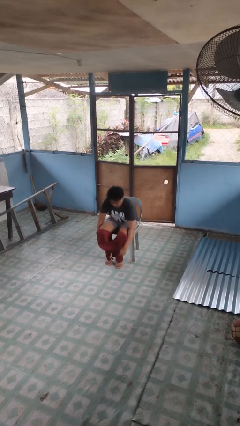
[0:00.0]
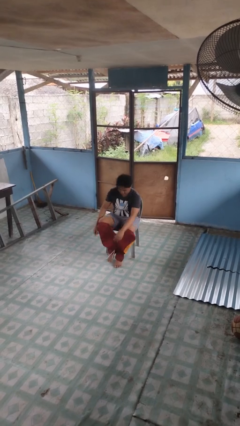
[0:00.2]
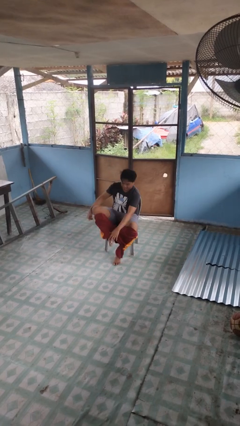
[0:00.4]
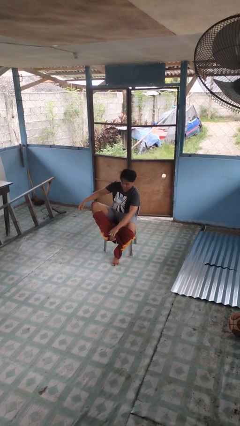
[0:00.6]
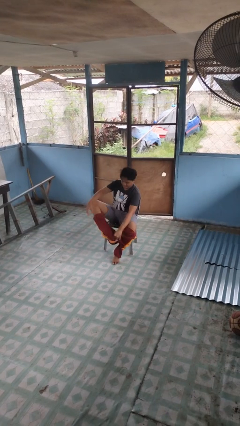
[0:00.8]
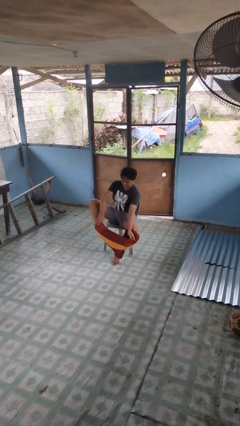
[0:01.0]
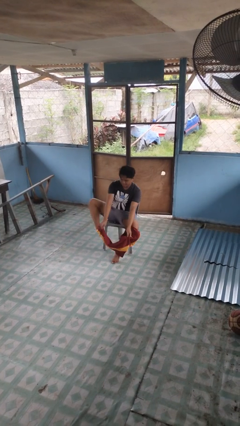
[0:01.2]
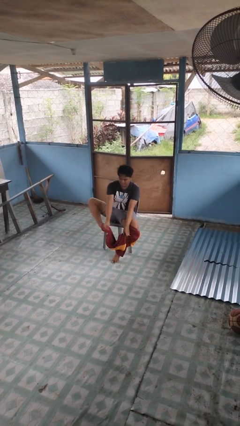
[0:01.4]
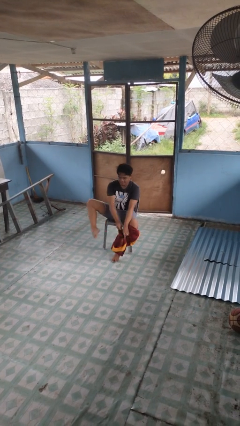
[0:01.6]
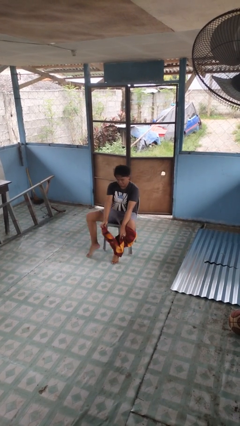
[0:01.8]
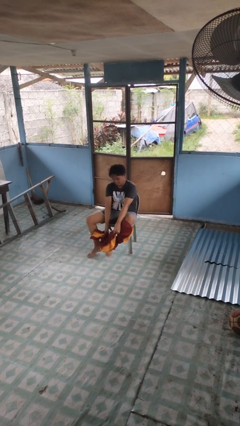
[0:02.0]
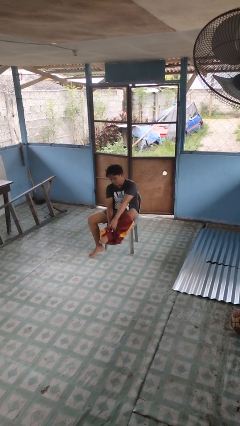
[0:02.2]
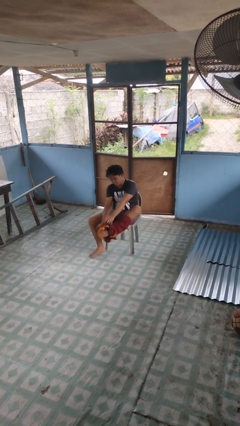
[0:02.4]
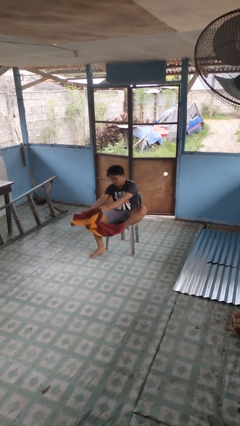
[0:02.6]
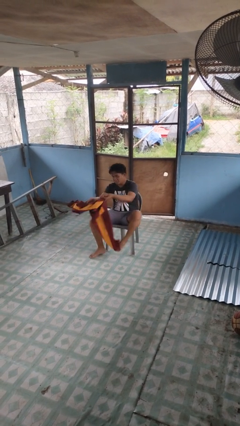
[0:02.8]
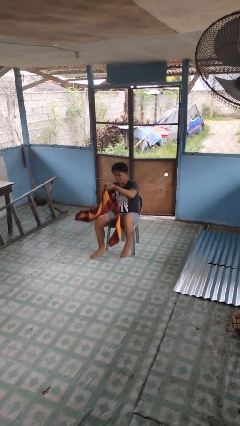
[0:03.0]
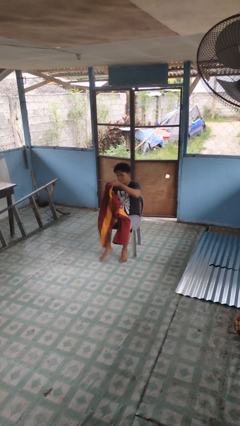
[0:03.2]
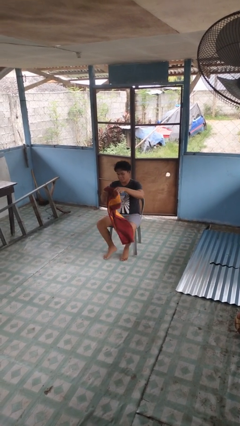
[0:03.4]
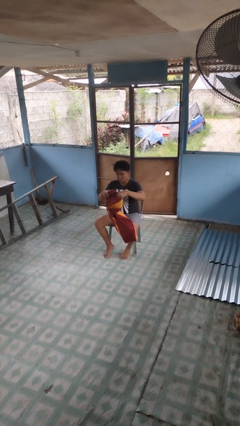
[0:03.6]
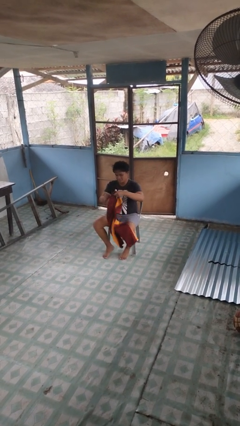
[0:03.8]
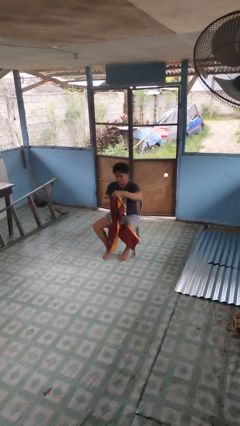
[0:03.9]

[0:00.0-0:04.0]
person takes off pants

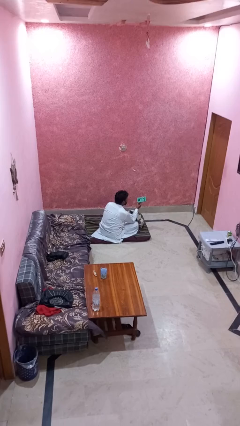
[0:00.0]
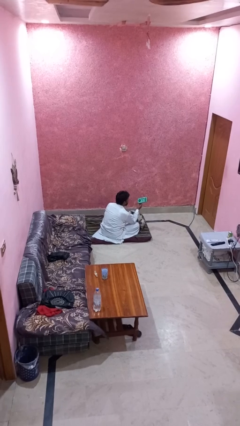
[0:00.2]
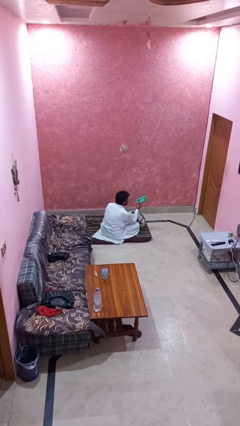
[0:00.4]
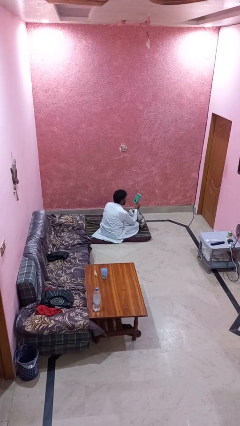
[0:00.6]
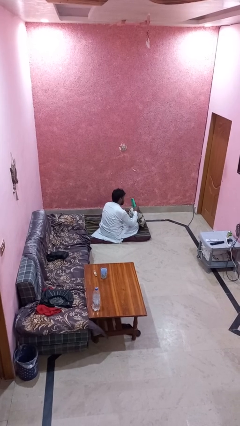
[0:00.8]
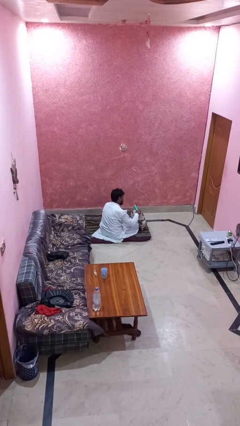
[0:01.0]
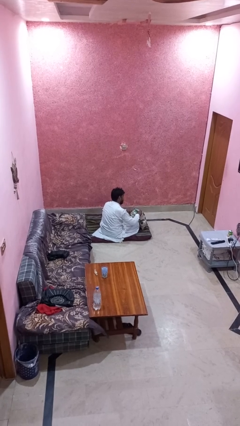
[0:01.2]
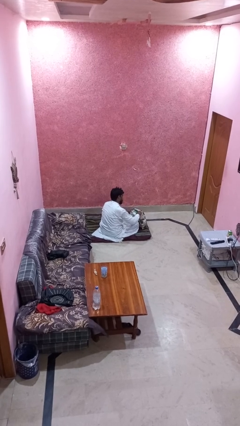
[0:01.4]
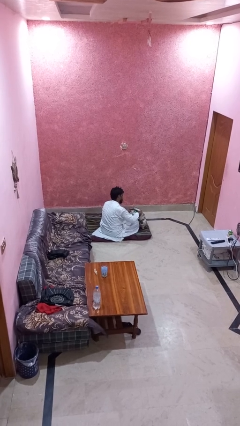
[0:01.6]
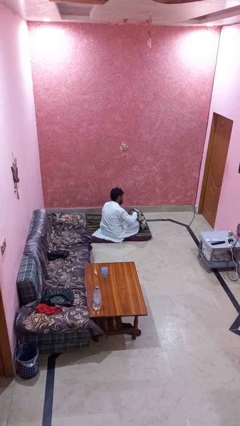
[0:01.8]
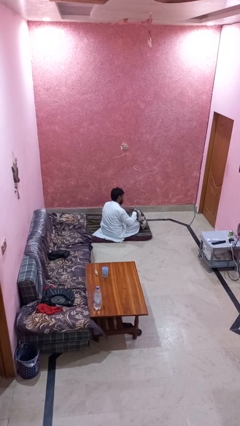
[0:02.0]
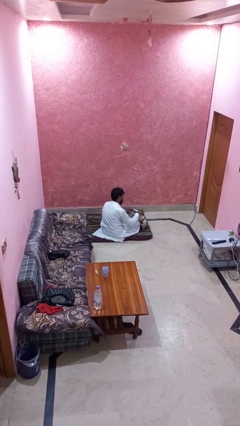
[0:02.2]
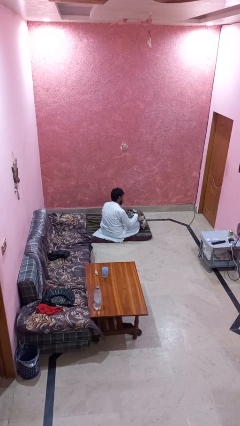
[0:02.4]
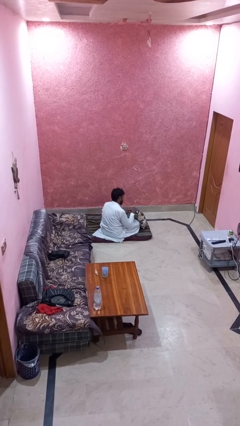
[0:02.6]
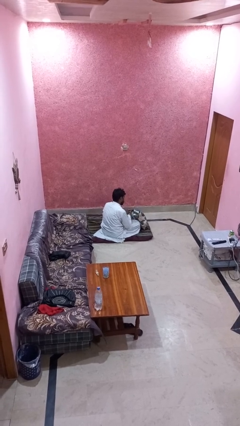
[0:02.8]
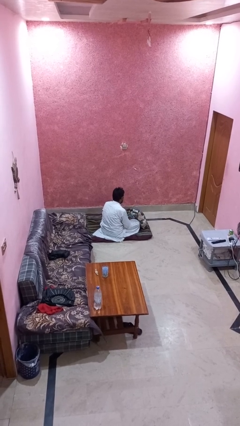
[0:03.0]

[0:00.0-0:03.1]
person puts object into backpack

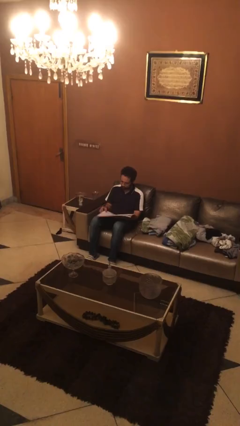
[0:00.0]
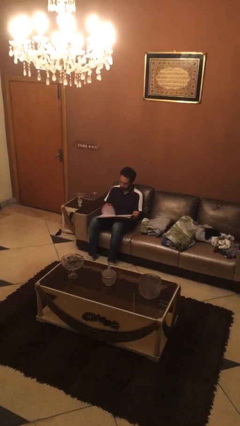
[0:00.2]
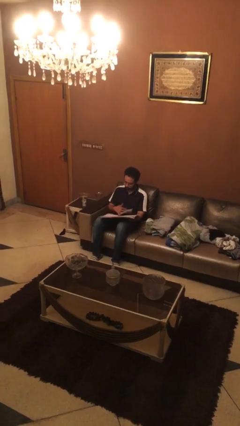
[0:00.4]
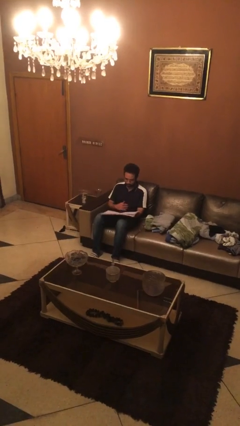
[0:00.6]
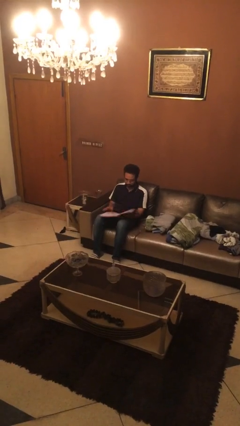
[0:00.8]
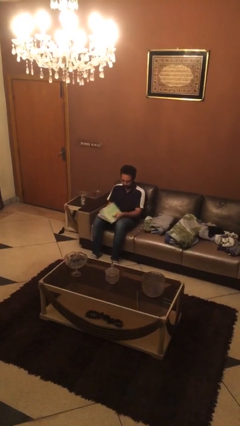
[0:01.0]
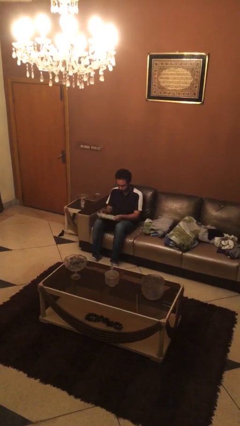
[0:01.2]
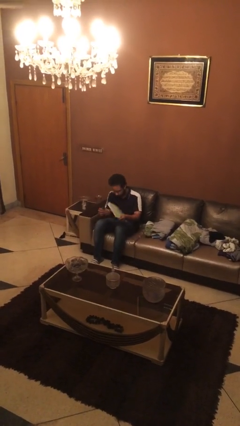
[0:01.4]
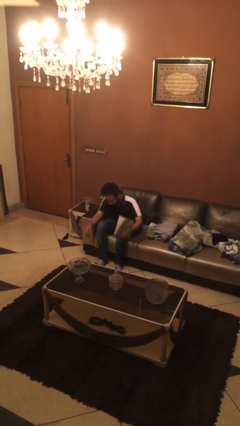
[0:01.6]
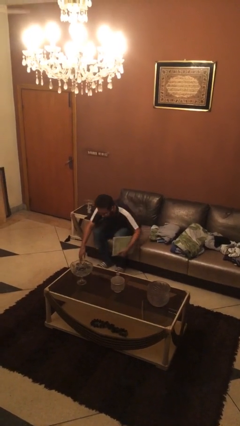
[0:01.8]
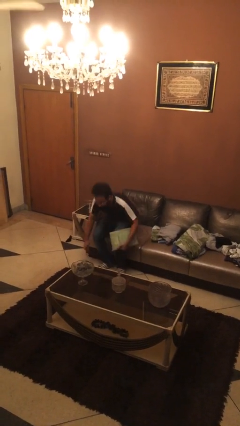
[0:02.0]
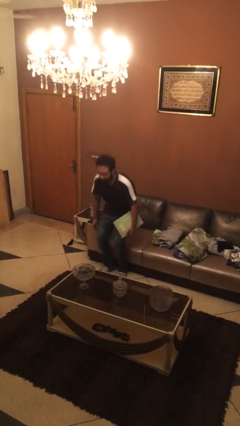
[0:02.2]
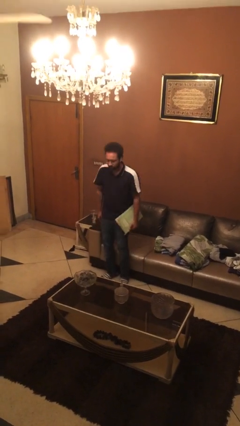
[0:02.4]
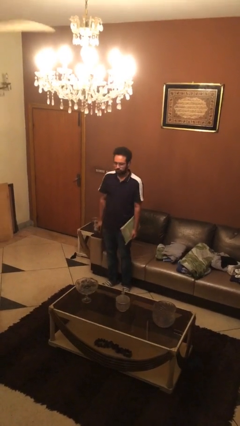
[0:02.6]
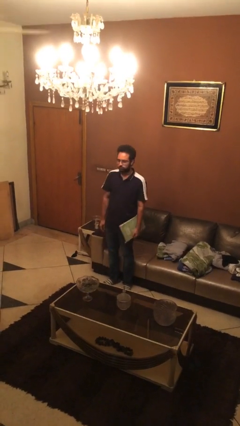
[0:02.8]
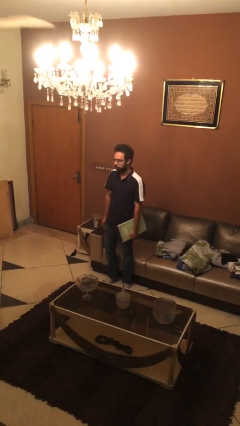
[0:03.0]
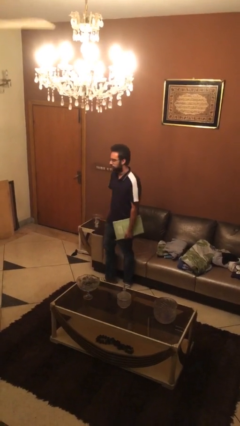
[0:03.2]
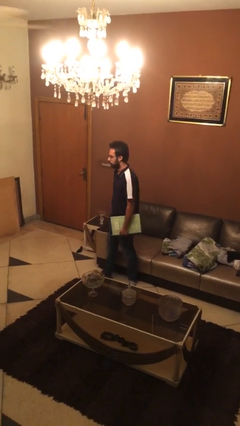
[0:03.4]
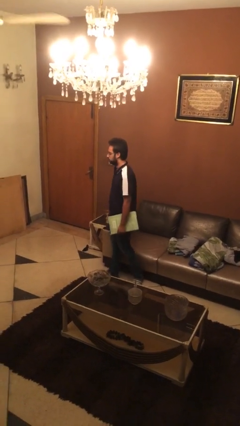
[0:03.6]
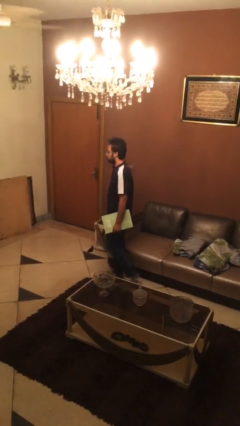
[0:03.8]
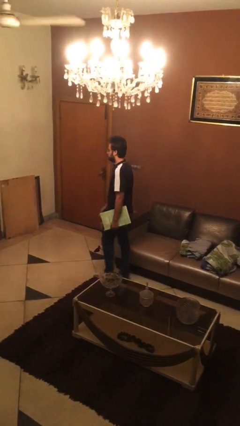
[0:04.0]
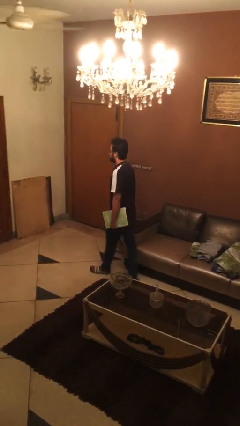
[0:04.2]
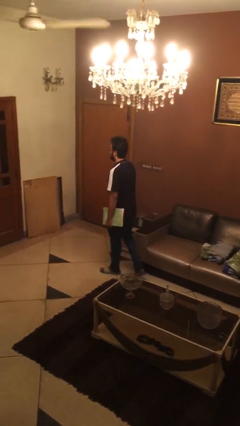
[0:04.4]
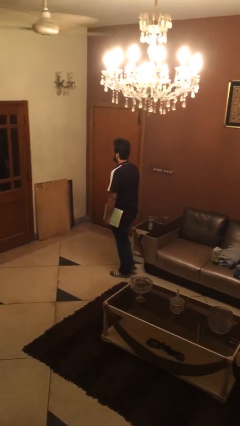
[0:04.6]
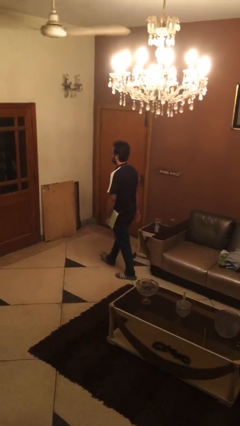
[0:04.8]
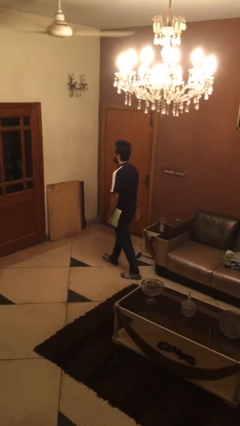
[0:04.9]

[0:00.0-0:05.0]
person stands up

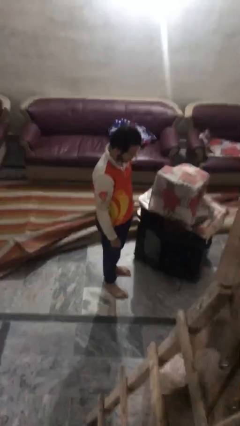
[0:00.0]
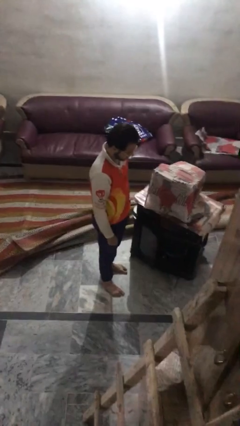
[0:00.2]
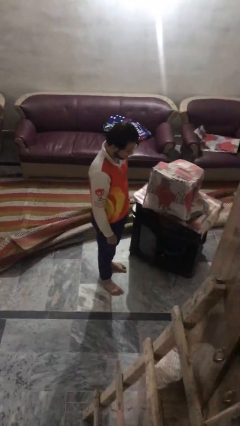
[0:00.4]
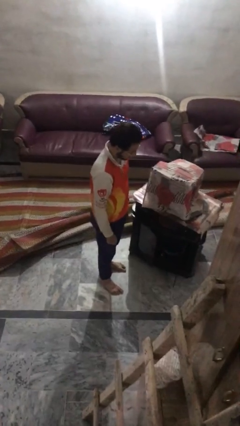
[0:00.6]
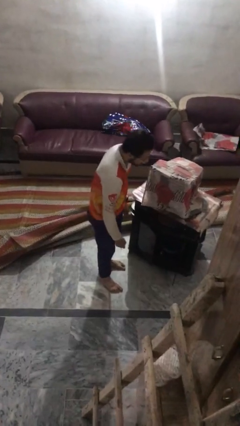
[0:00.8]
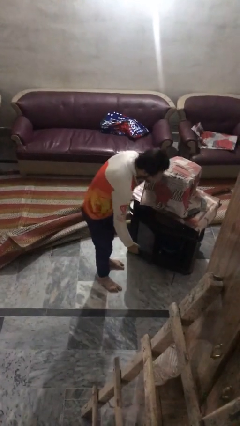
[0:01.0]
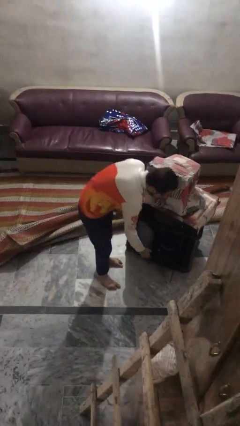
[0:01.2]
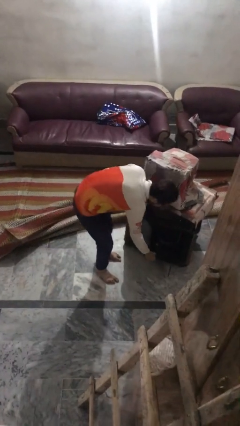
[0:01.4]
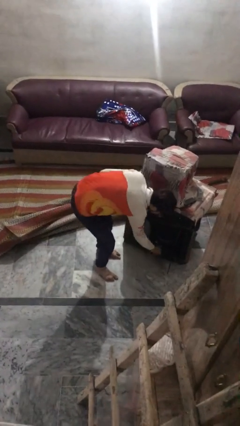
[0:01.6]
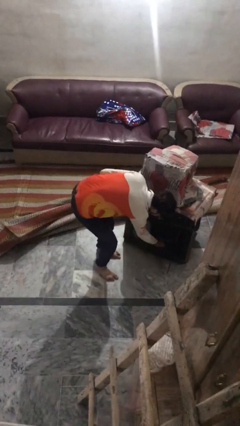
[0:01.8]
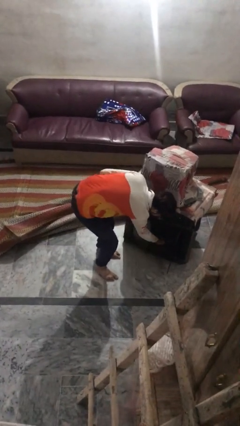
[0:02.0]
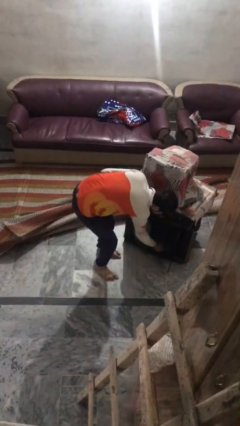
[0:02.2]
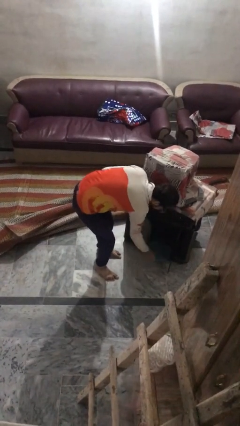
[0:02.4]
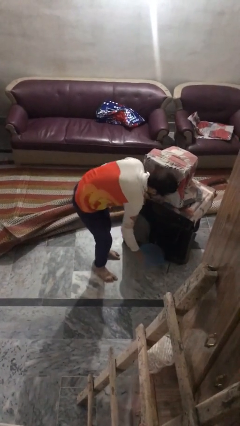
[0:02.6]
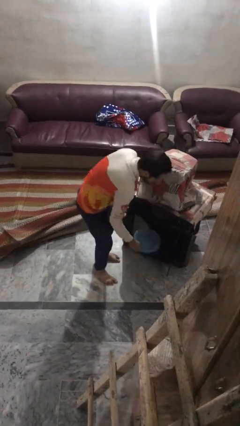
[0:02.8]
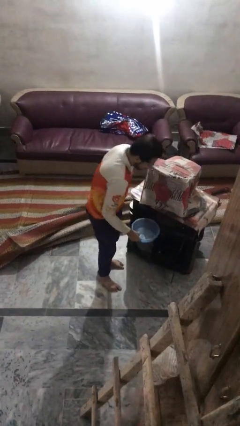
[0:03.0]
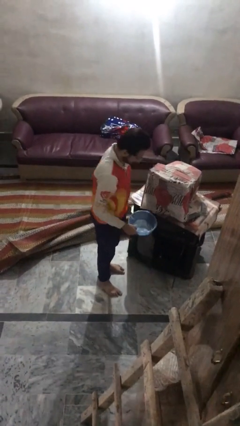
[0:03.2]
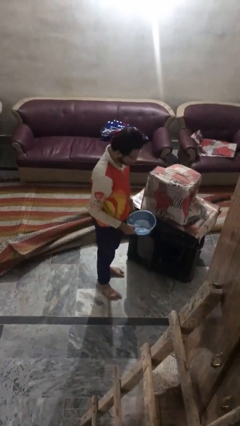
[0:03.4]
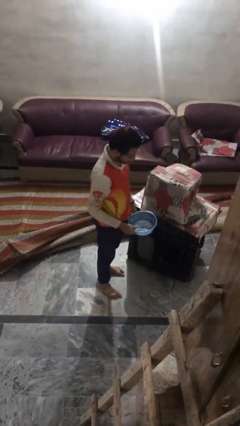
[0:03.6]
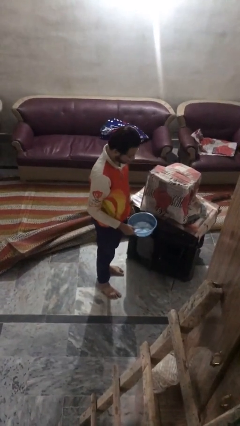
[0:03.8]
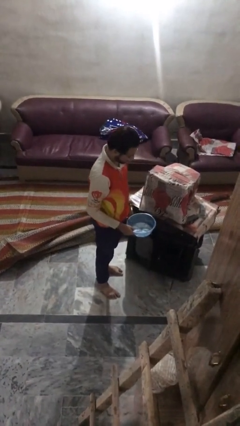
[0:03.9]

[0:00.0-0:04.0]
person picks up object from cabinet

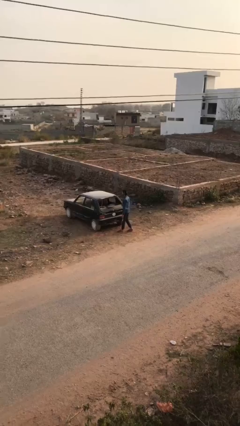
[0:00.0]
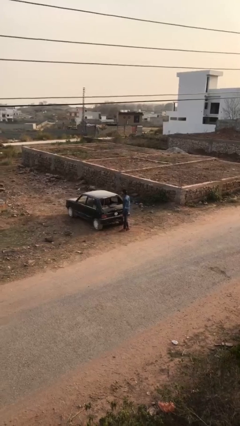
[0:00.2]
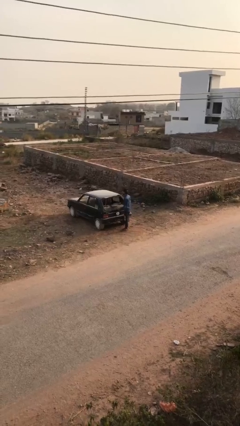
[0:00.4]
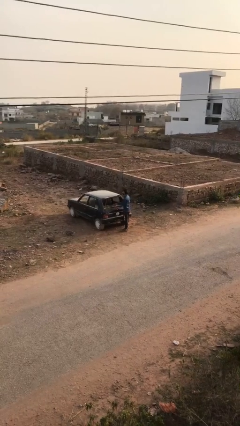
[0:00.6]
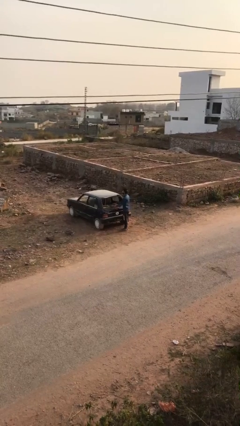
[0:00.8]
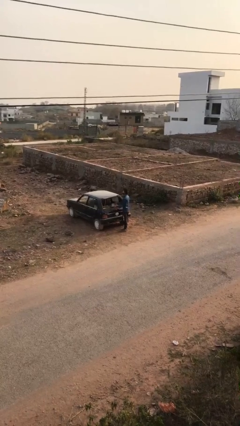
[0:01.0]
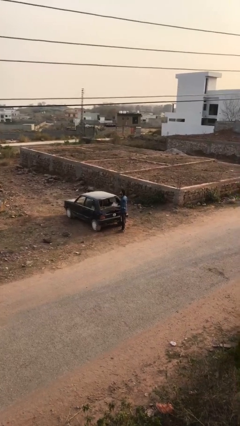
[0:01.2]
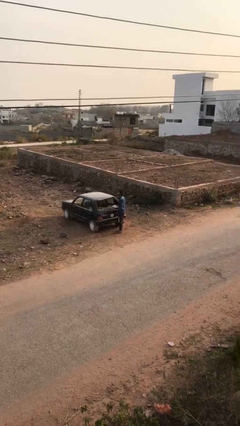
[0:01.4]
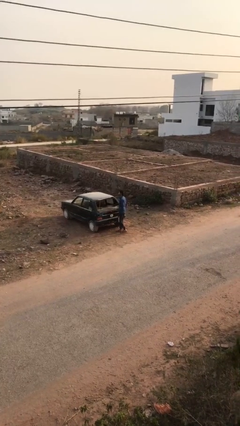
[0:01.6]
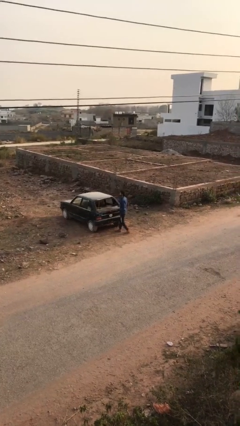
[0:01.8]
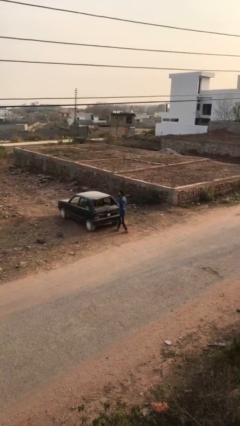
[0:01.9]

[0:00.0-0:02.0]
person unloads car
